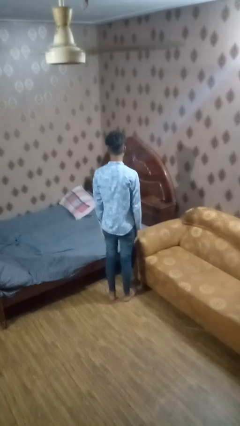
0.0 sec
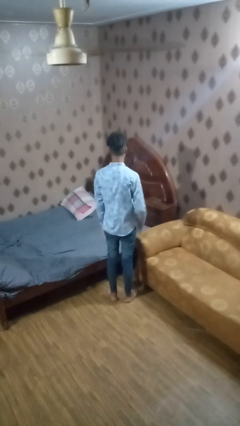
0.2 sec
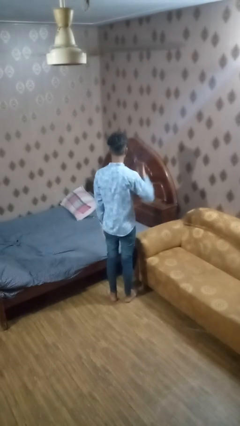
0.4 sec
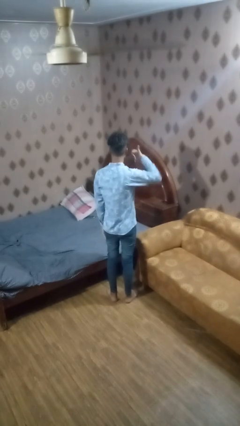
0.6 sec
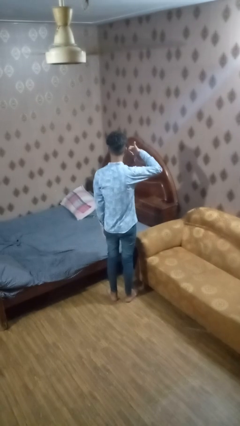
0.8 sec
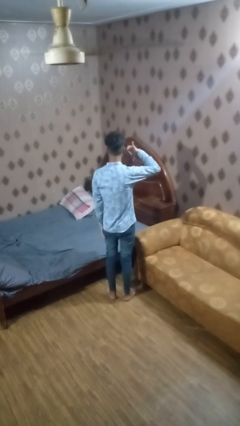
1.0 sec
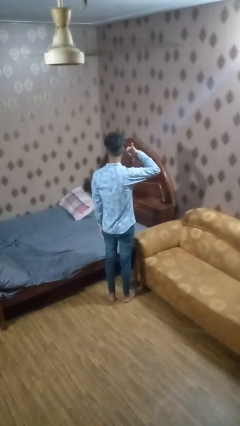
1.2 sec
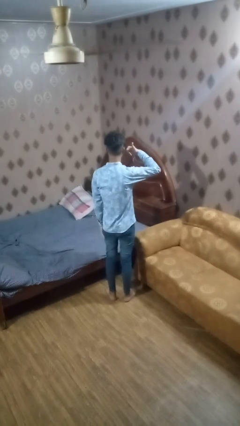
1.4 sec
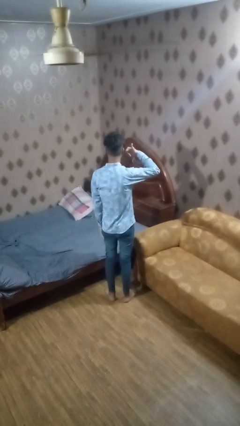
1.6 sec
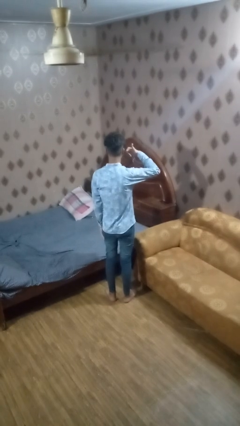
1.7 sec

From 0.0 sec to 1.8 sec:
person gestures call me

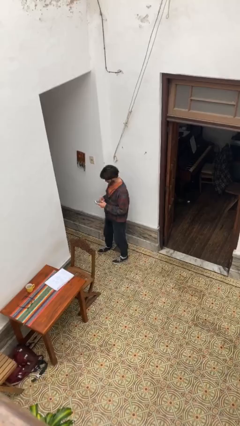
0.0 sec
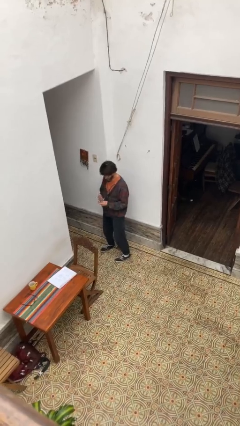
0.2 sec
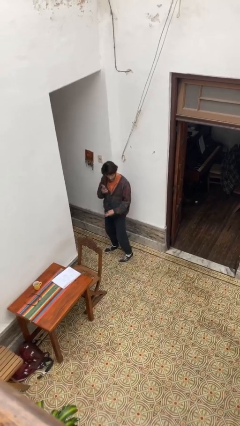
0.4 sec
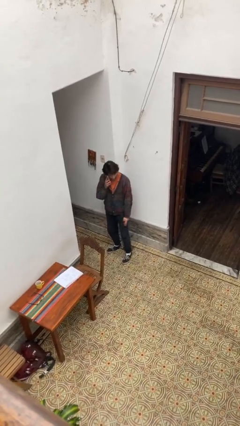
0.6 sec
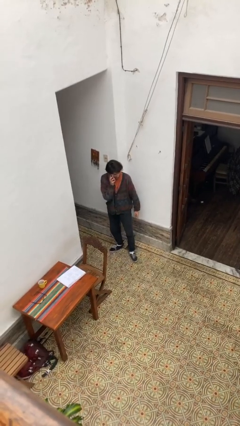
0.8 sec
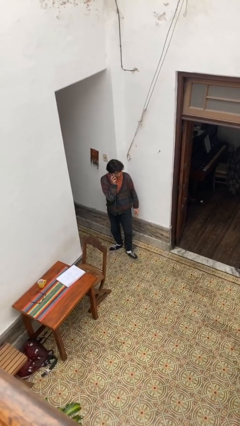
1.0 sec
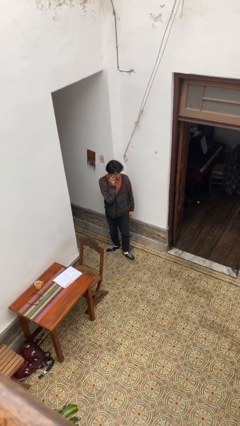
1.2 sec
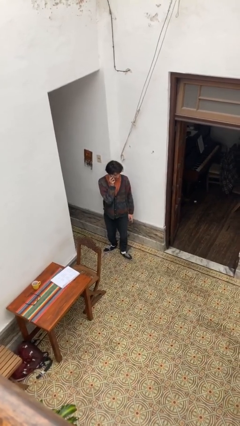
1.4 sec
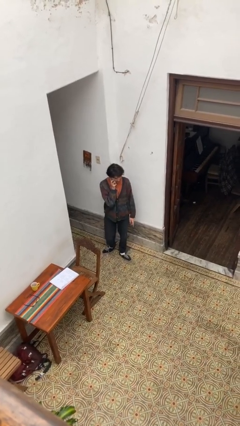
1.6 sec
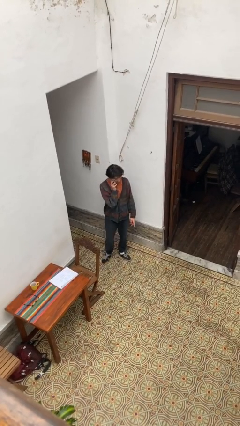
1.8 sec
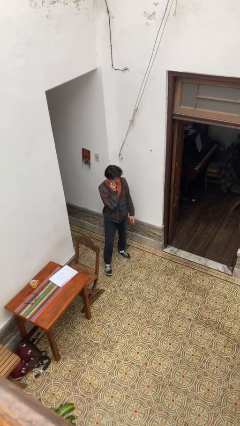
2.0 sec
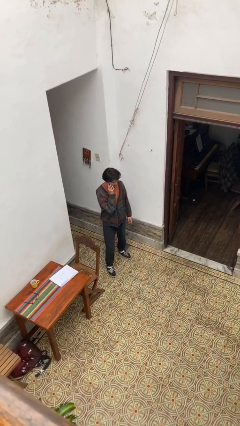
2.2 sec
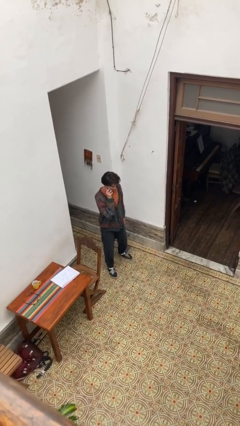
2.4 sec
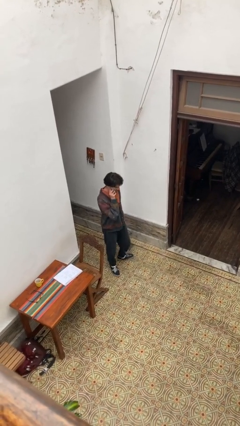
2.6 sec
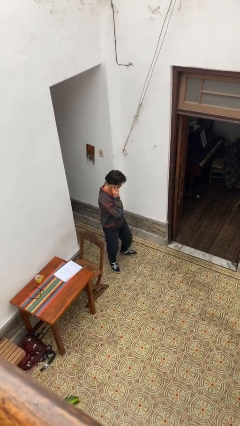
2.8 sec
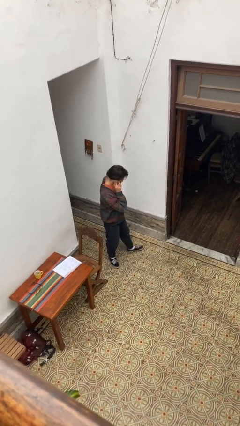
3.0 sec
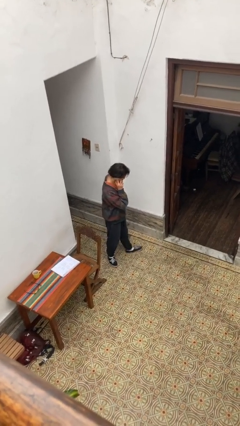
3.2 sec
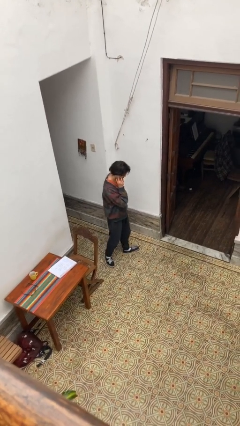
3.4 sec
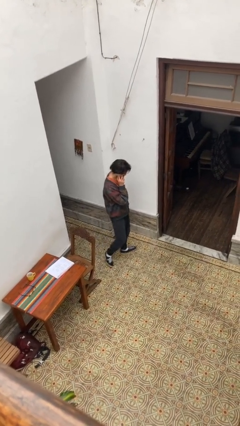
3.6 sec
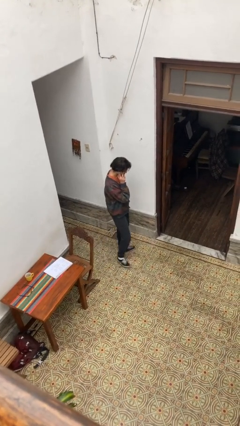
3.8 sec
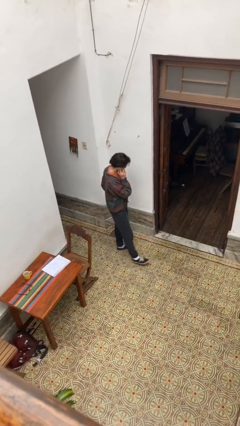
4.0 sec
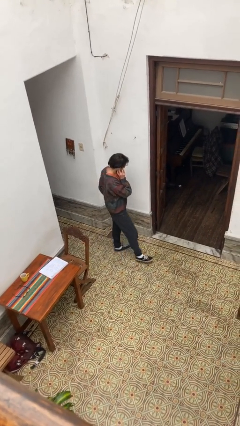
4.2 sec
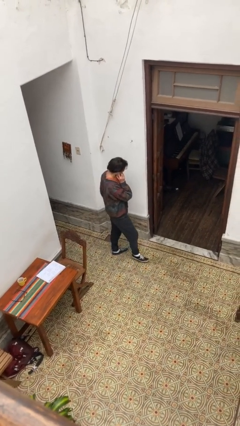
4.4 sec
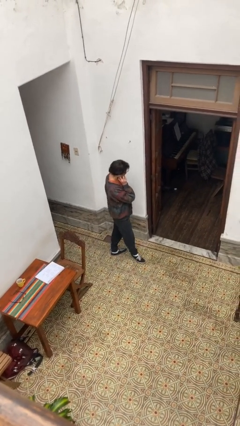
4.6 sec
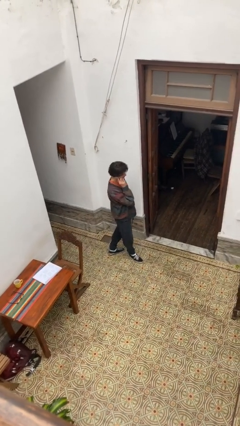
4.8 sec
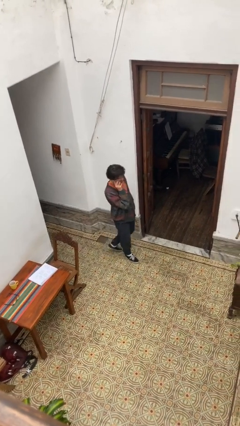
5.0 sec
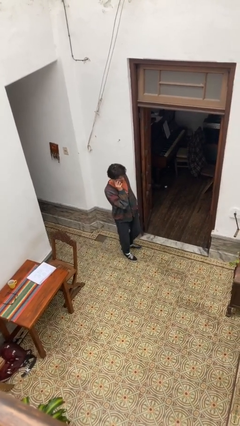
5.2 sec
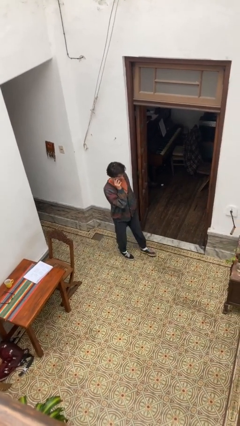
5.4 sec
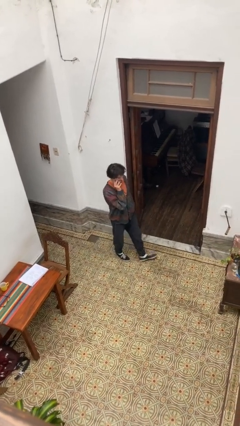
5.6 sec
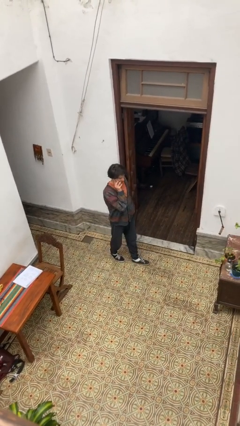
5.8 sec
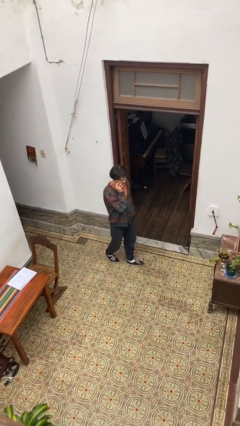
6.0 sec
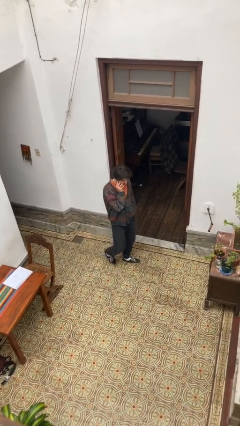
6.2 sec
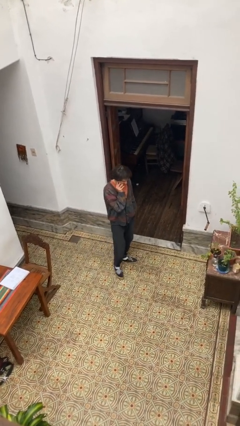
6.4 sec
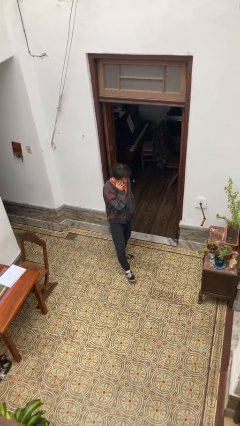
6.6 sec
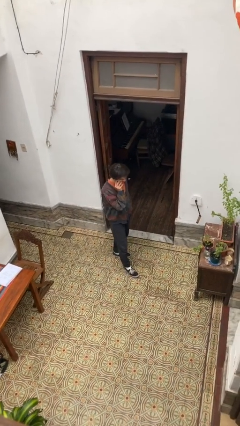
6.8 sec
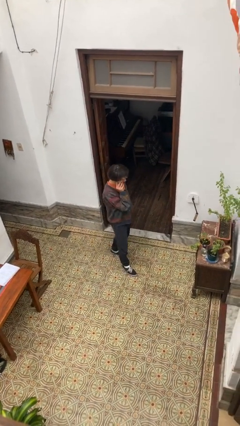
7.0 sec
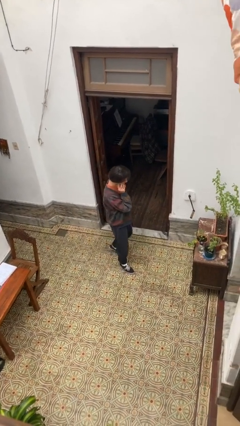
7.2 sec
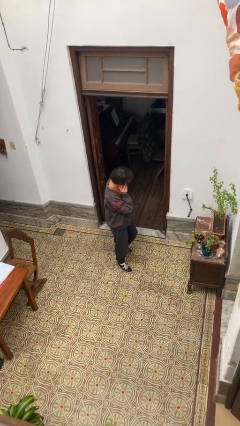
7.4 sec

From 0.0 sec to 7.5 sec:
person talks on phone

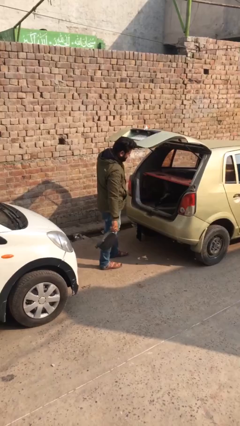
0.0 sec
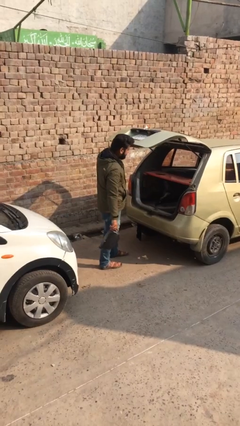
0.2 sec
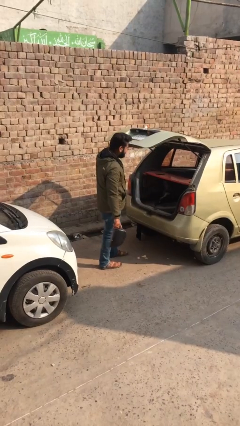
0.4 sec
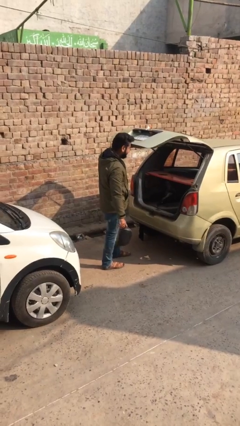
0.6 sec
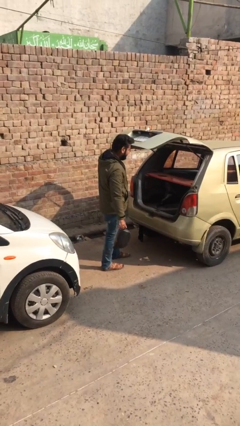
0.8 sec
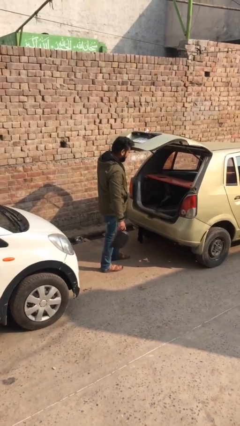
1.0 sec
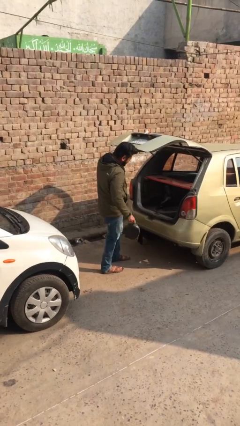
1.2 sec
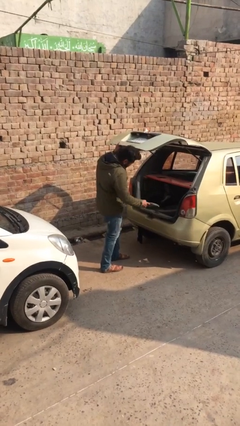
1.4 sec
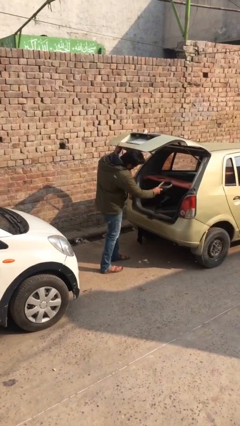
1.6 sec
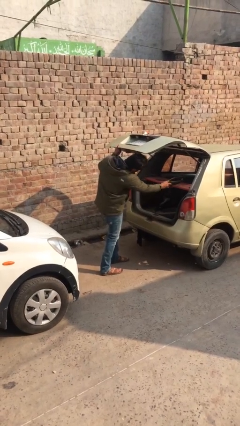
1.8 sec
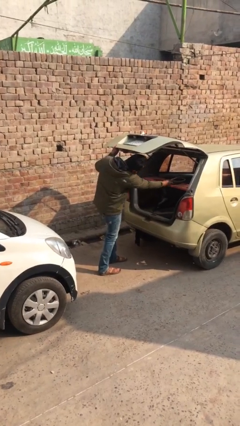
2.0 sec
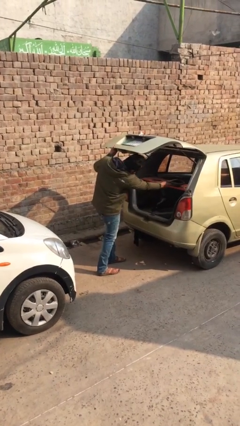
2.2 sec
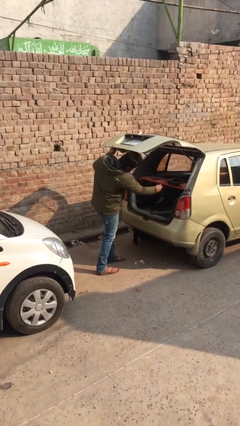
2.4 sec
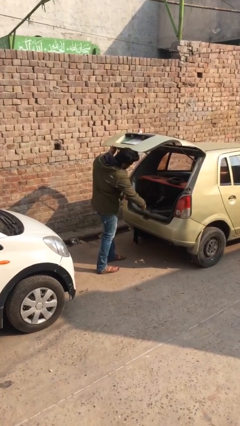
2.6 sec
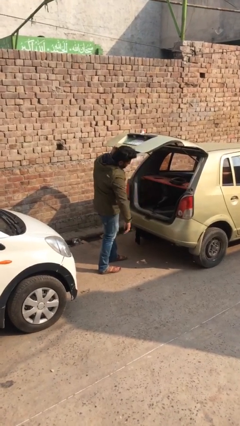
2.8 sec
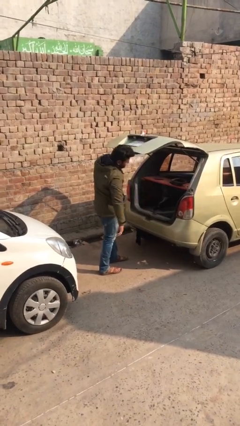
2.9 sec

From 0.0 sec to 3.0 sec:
person loads car

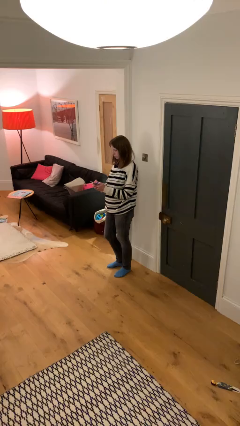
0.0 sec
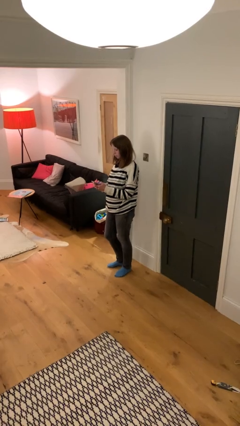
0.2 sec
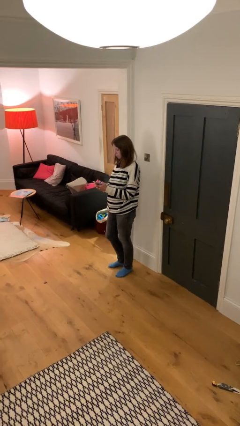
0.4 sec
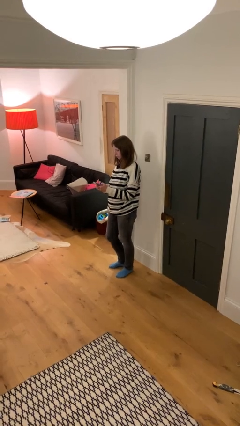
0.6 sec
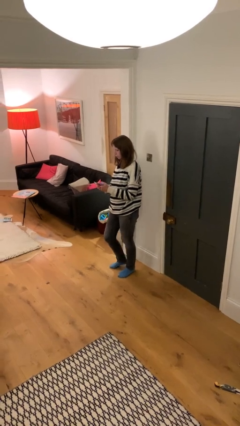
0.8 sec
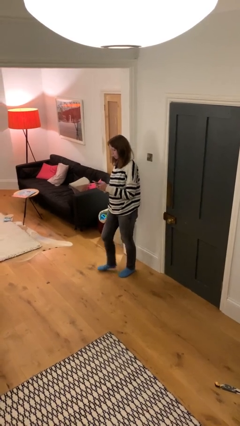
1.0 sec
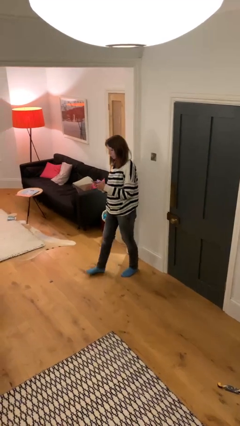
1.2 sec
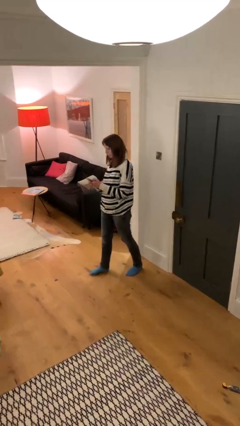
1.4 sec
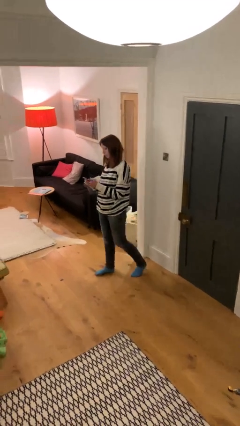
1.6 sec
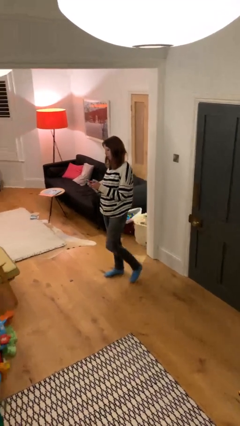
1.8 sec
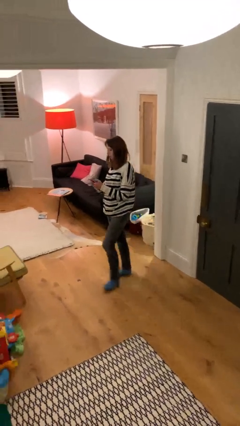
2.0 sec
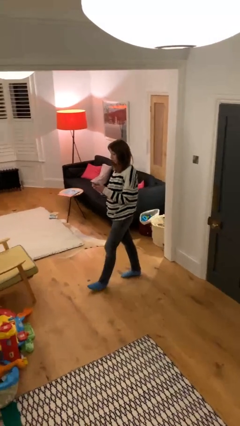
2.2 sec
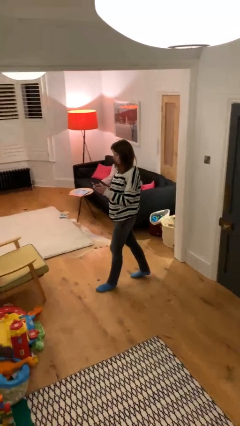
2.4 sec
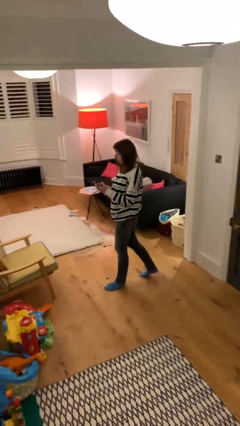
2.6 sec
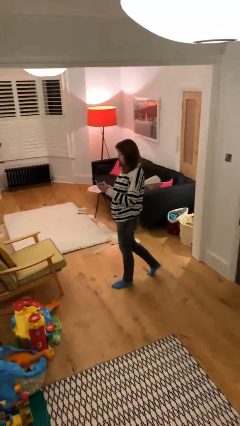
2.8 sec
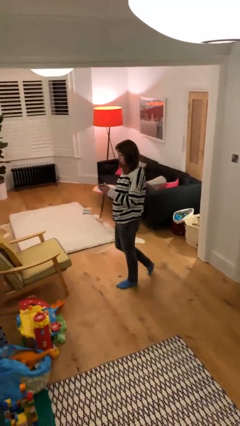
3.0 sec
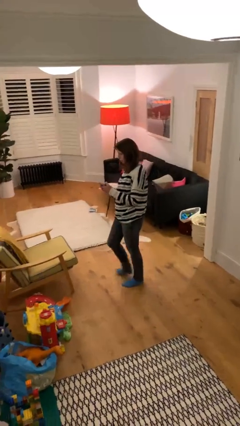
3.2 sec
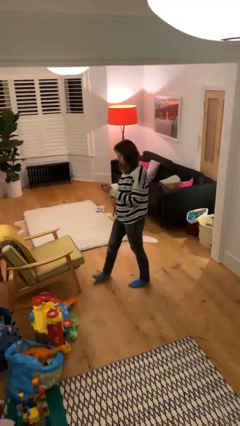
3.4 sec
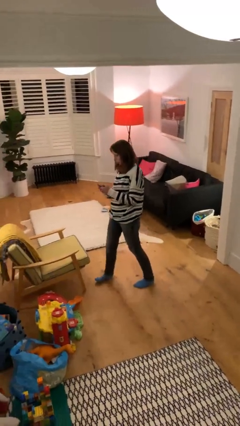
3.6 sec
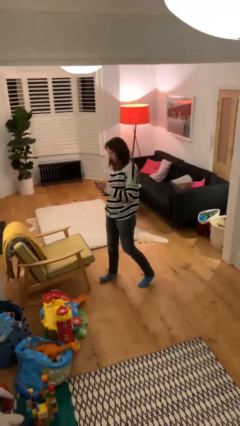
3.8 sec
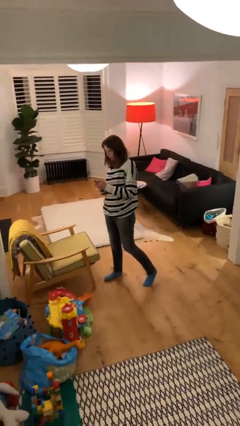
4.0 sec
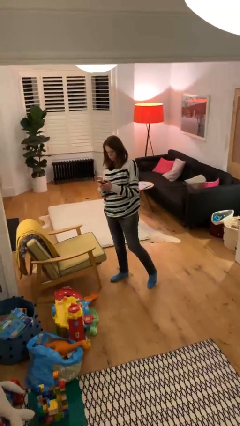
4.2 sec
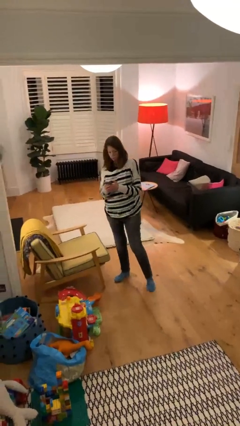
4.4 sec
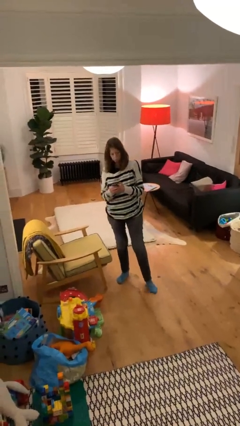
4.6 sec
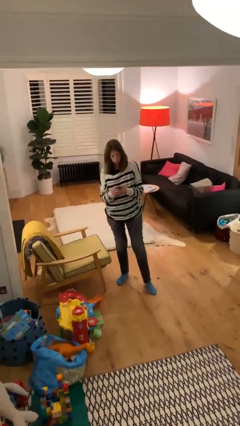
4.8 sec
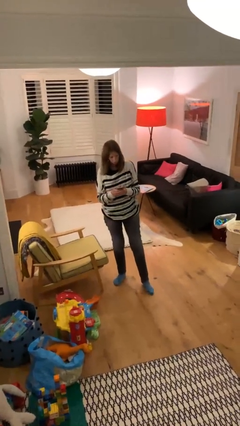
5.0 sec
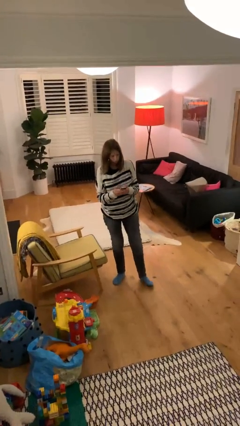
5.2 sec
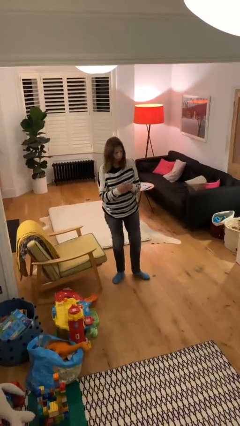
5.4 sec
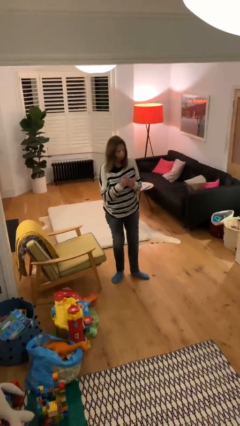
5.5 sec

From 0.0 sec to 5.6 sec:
person texts on phone
